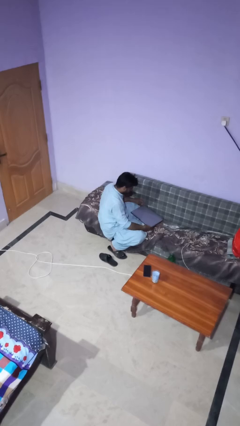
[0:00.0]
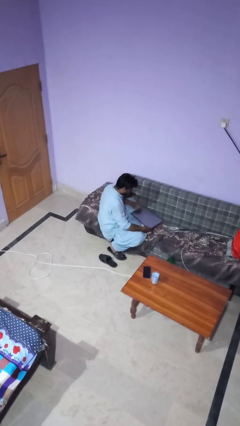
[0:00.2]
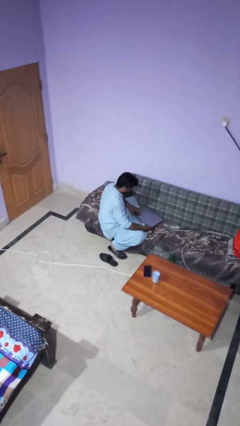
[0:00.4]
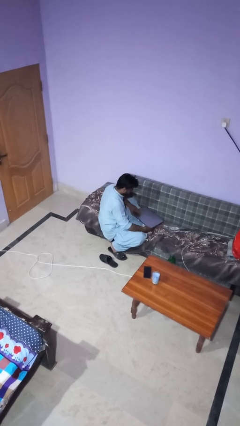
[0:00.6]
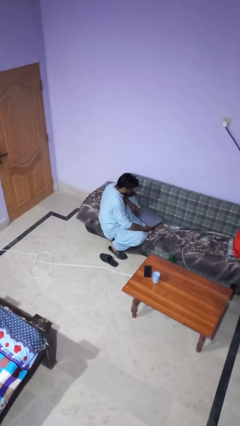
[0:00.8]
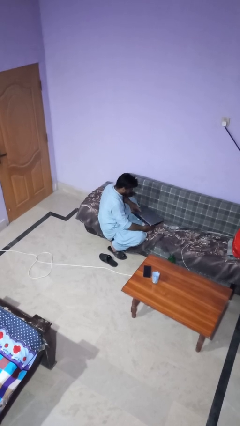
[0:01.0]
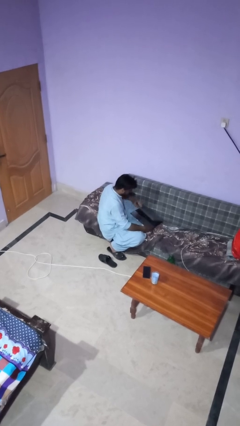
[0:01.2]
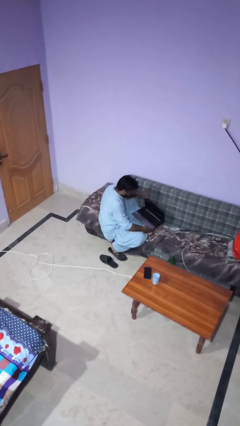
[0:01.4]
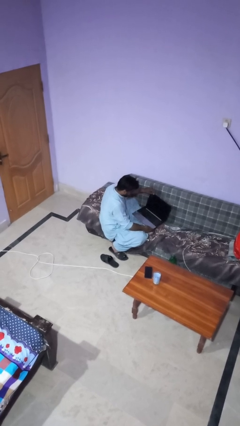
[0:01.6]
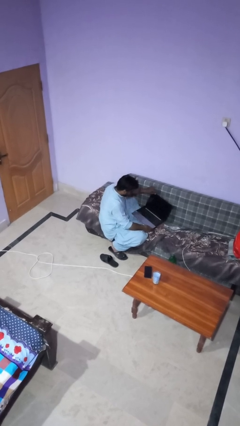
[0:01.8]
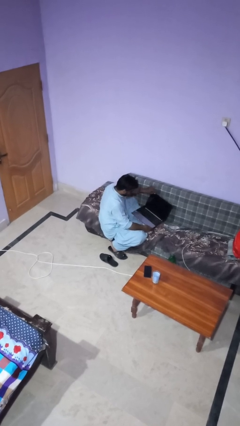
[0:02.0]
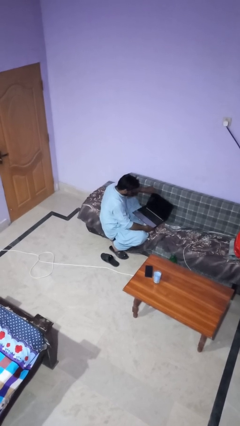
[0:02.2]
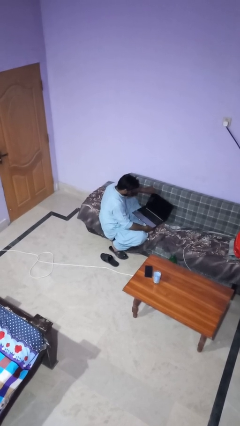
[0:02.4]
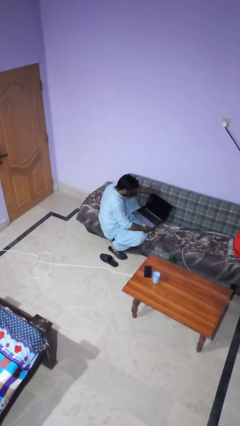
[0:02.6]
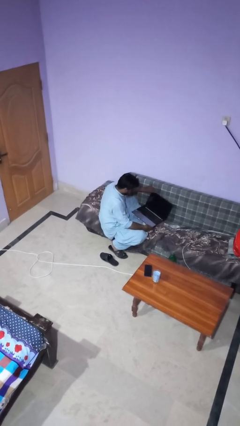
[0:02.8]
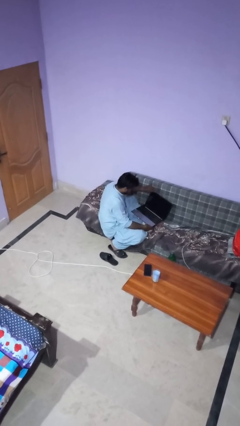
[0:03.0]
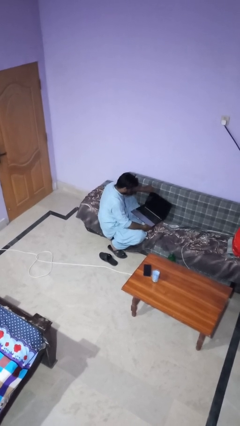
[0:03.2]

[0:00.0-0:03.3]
person opens laptop

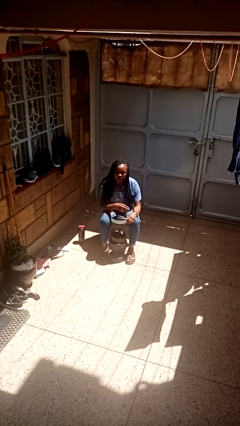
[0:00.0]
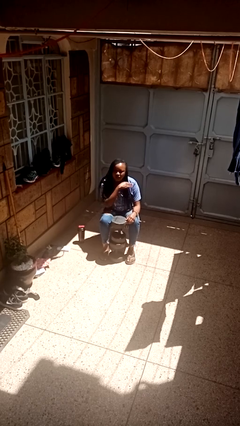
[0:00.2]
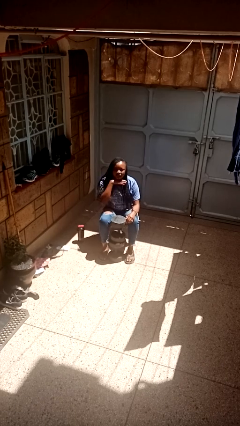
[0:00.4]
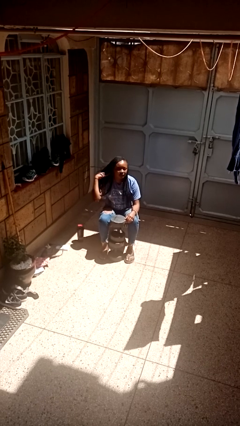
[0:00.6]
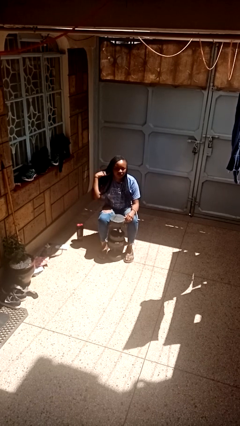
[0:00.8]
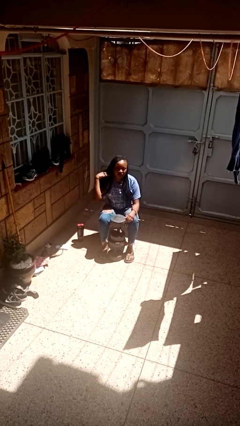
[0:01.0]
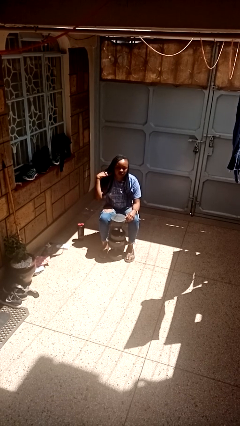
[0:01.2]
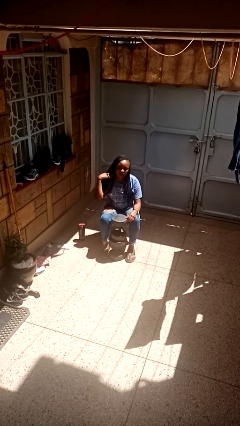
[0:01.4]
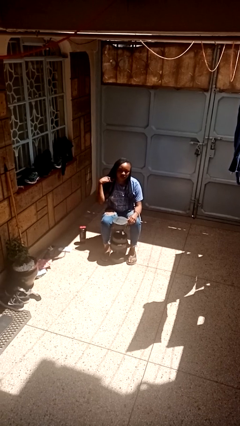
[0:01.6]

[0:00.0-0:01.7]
person gestures cut

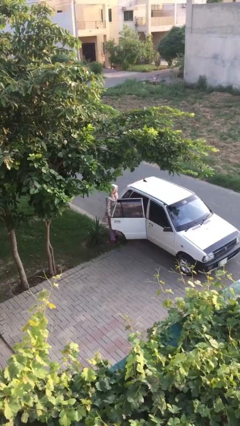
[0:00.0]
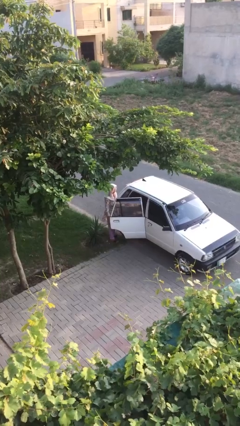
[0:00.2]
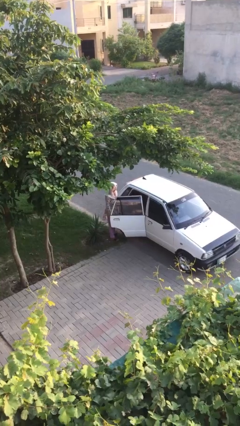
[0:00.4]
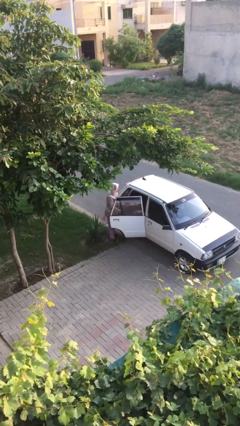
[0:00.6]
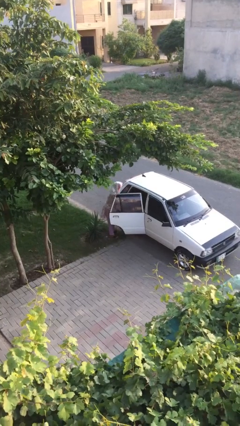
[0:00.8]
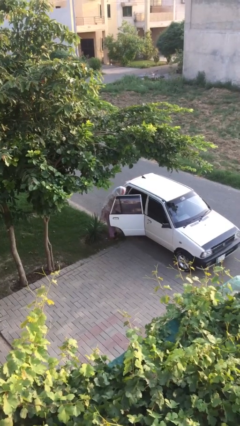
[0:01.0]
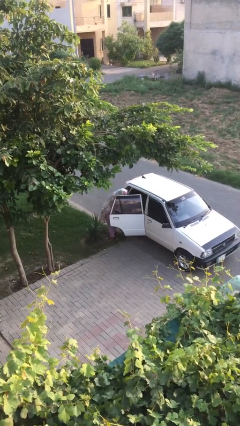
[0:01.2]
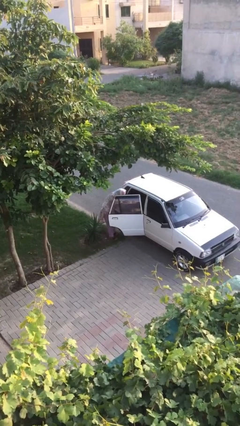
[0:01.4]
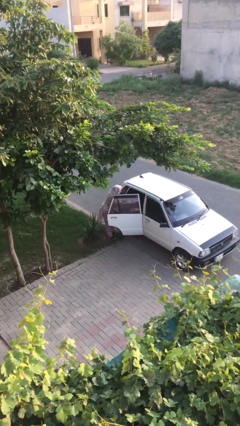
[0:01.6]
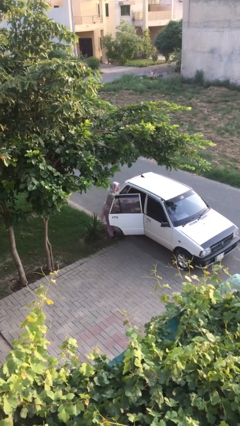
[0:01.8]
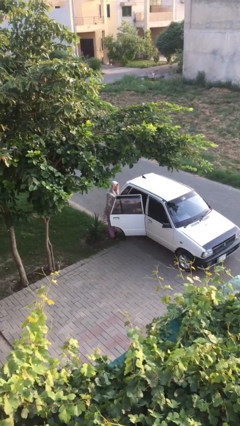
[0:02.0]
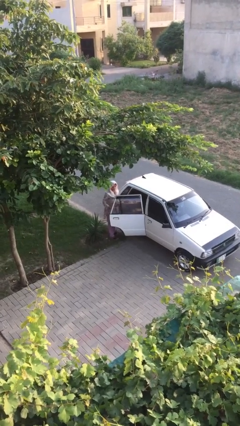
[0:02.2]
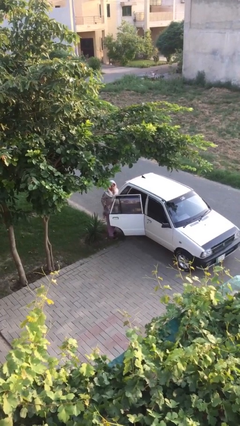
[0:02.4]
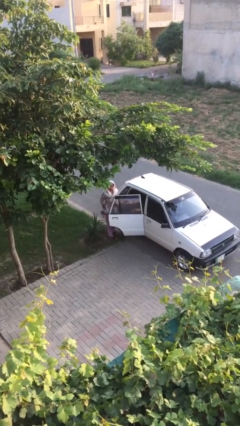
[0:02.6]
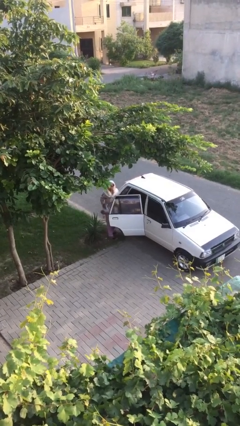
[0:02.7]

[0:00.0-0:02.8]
person unloads car

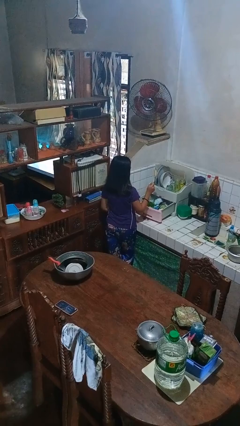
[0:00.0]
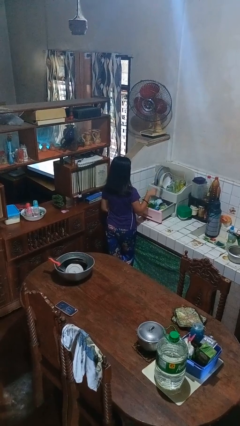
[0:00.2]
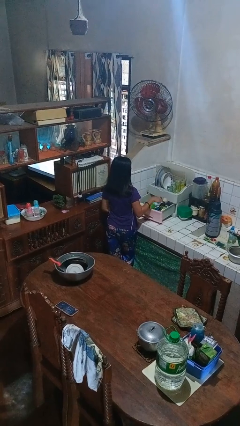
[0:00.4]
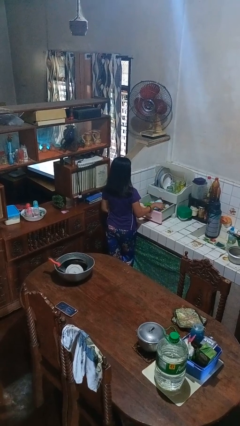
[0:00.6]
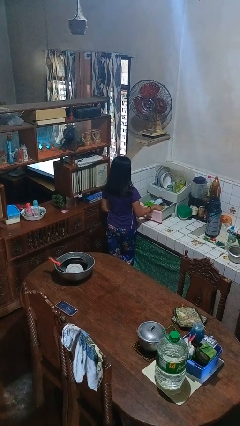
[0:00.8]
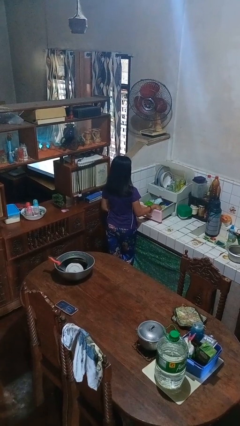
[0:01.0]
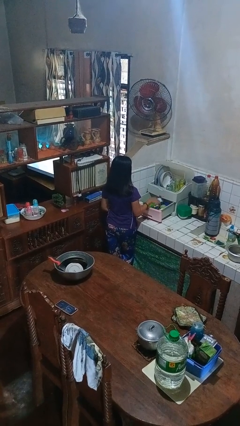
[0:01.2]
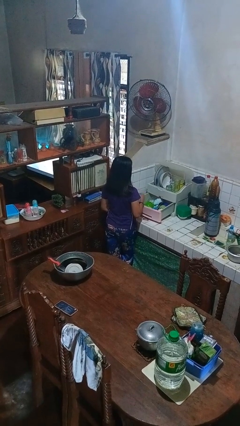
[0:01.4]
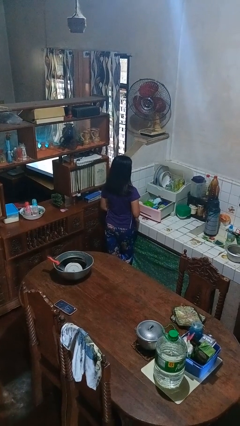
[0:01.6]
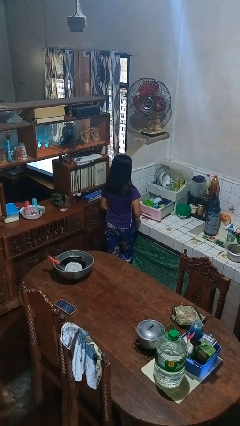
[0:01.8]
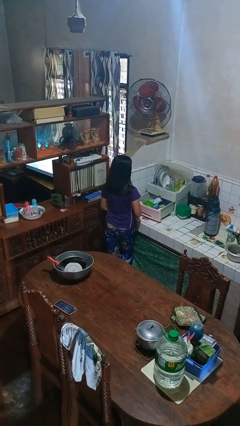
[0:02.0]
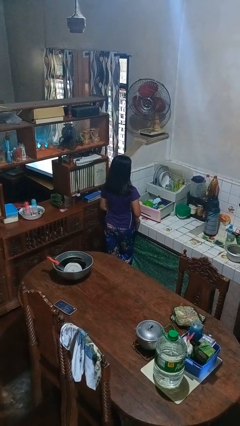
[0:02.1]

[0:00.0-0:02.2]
person puts object into kitchen drawer

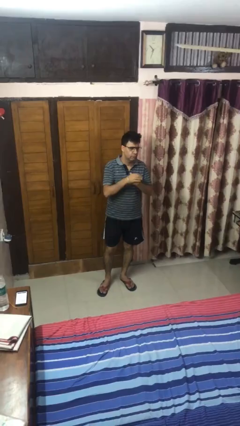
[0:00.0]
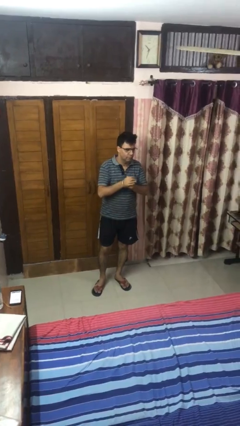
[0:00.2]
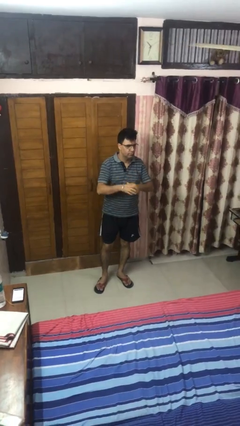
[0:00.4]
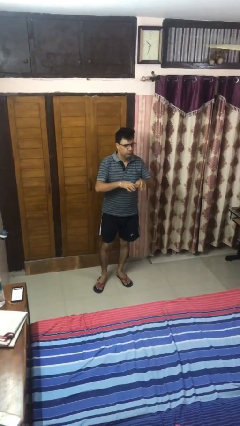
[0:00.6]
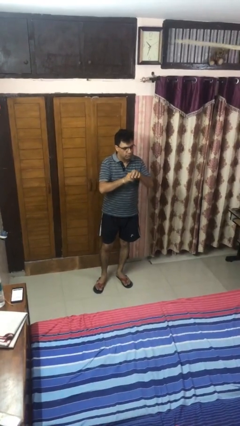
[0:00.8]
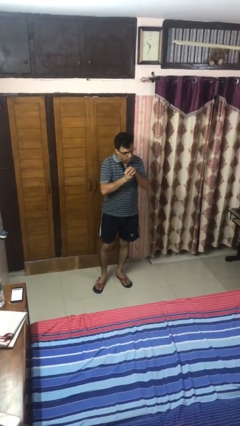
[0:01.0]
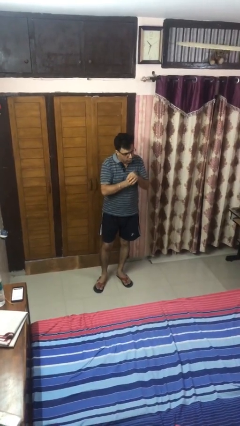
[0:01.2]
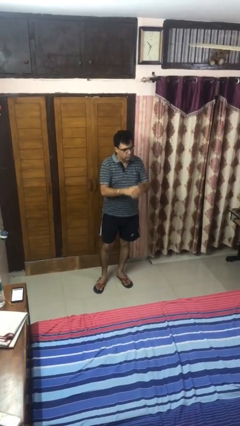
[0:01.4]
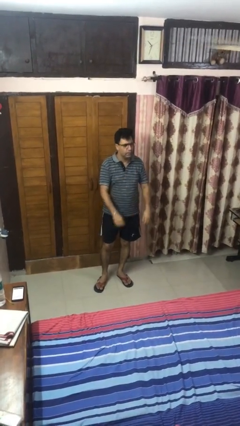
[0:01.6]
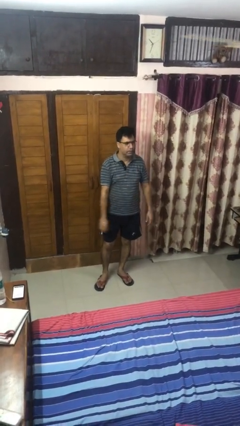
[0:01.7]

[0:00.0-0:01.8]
person cracks knuckles

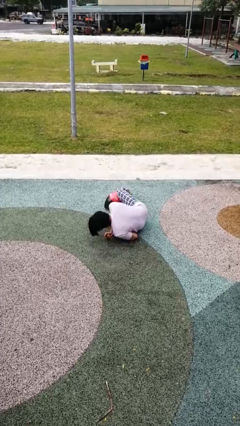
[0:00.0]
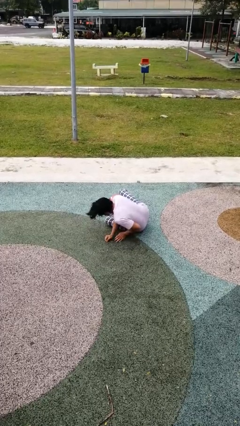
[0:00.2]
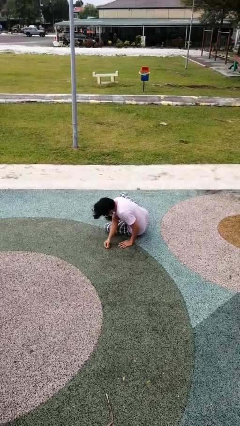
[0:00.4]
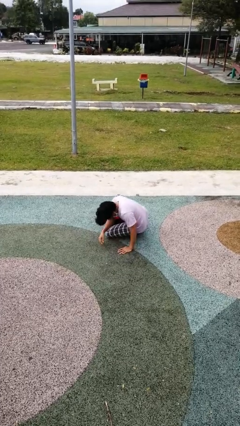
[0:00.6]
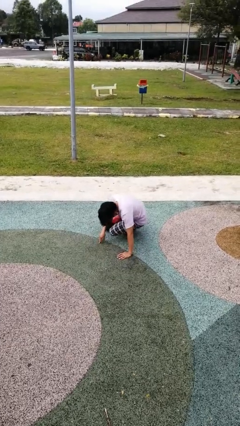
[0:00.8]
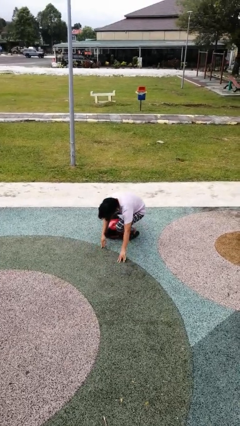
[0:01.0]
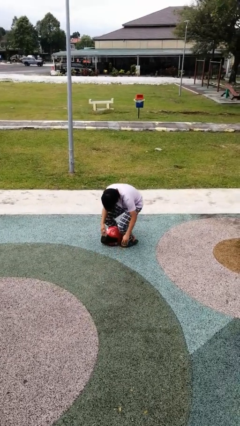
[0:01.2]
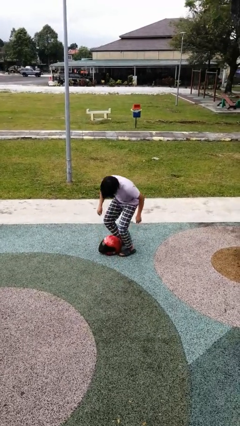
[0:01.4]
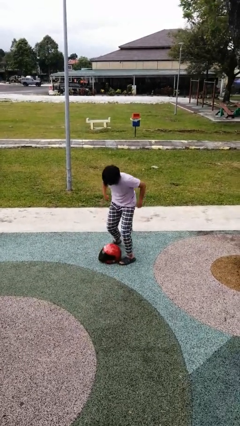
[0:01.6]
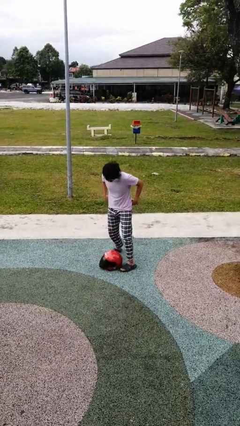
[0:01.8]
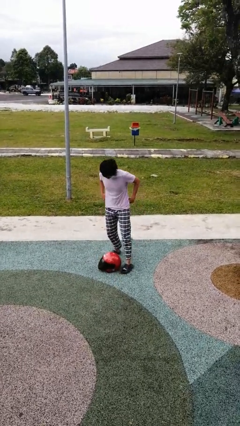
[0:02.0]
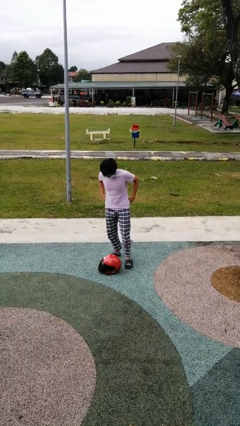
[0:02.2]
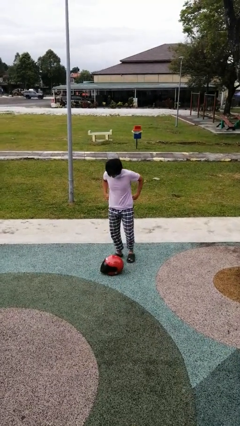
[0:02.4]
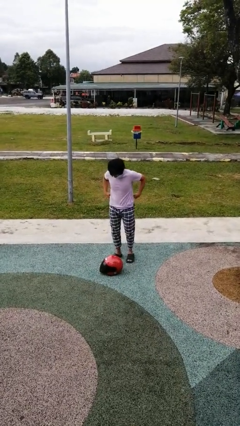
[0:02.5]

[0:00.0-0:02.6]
person stands up from floor

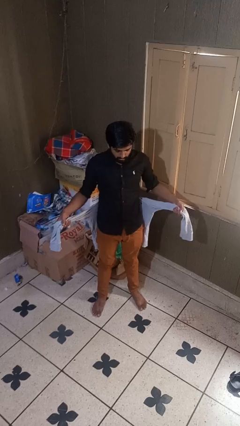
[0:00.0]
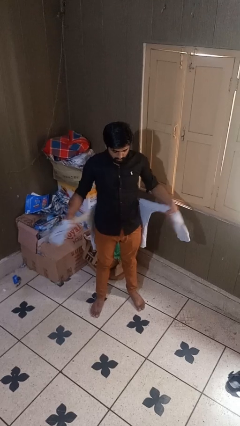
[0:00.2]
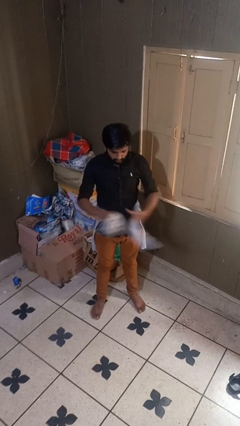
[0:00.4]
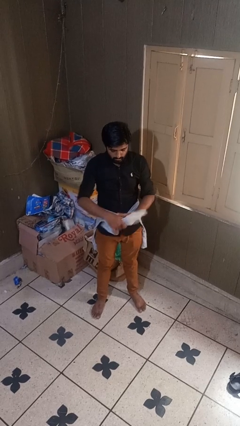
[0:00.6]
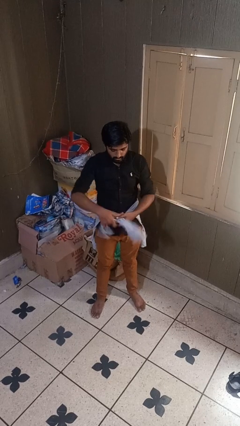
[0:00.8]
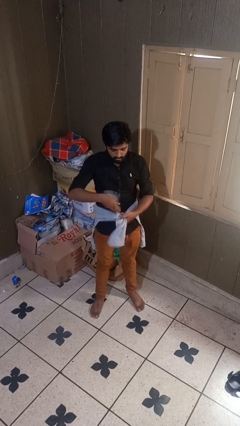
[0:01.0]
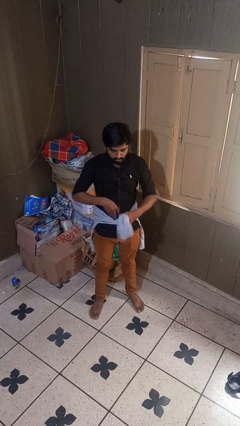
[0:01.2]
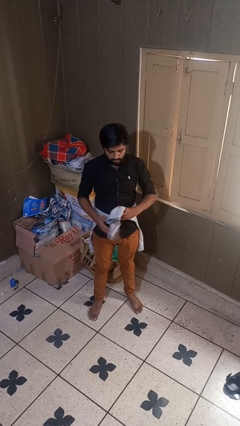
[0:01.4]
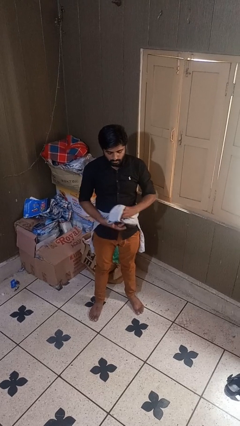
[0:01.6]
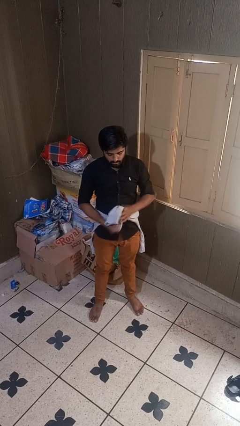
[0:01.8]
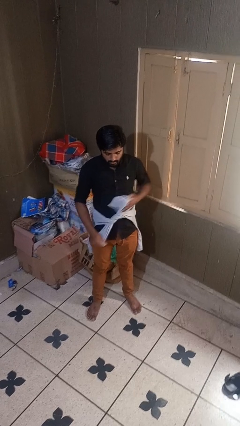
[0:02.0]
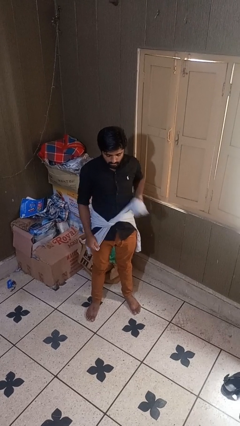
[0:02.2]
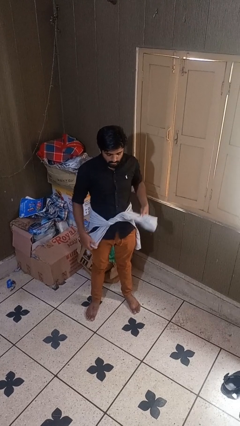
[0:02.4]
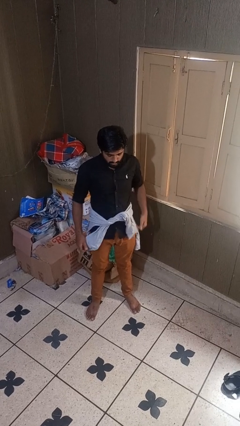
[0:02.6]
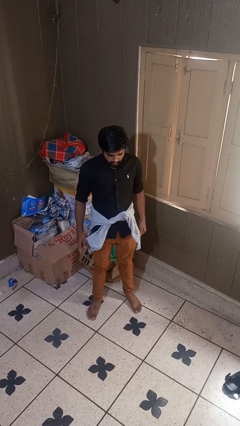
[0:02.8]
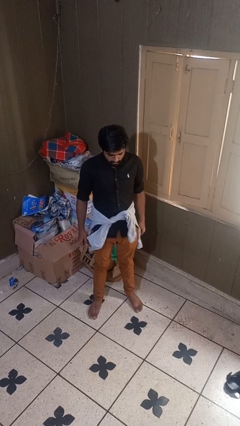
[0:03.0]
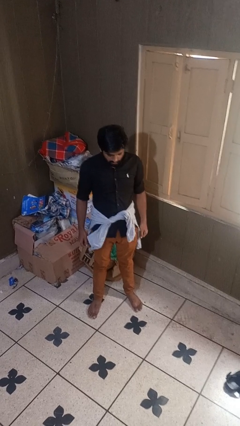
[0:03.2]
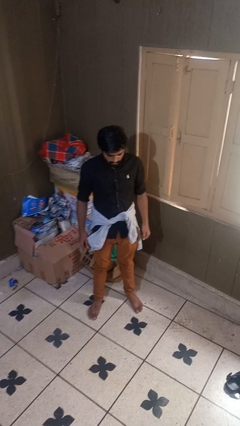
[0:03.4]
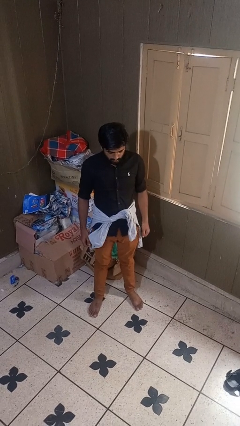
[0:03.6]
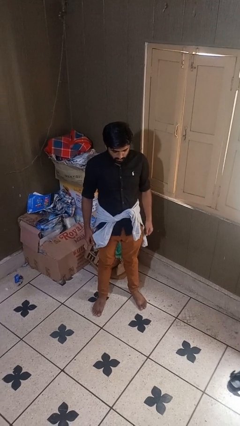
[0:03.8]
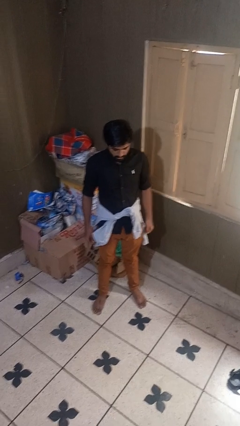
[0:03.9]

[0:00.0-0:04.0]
person ties jacket around waist
